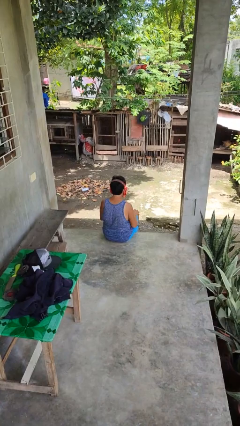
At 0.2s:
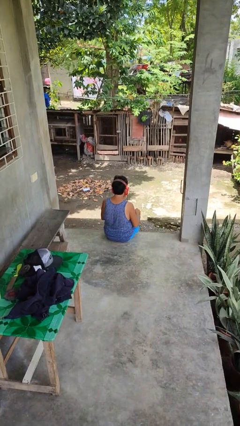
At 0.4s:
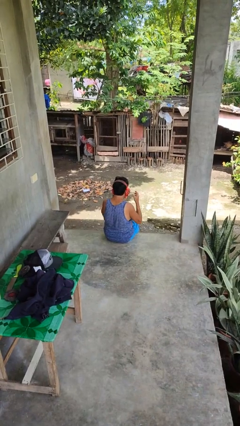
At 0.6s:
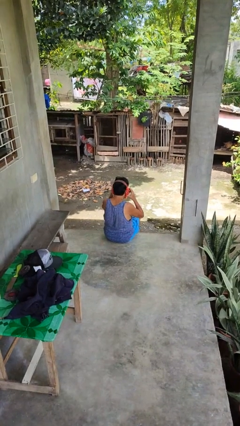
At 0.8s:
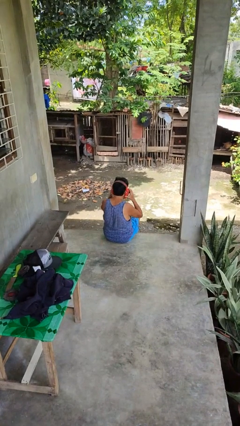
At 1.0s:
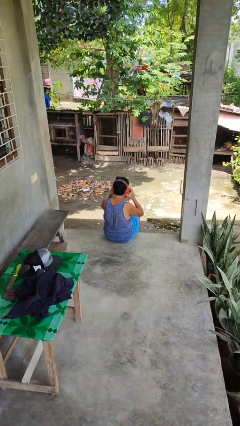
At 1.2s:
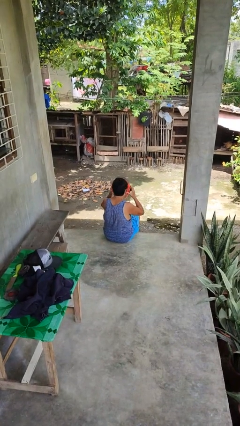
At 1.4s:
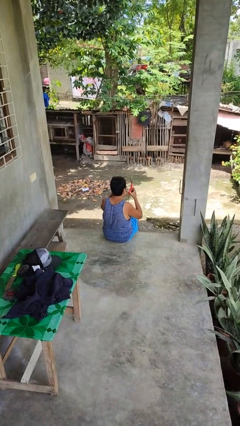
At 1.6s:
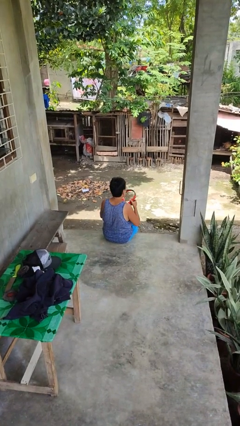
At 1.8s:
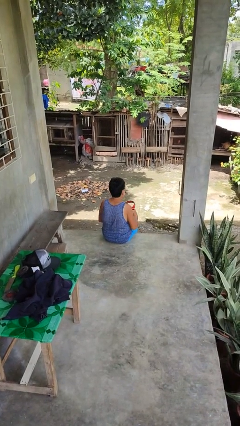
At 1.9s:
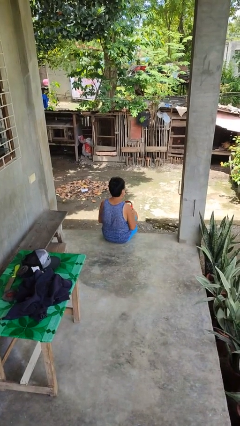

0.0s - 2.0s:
person takes off headphones

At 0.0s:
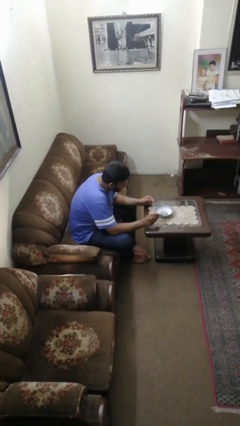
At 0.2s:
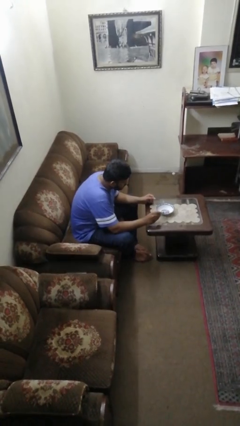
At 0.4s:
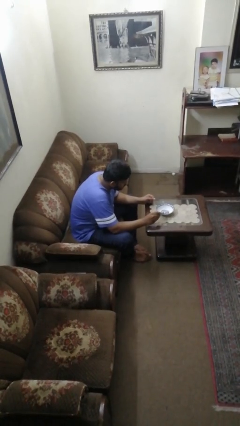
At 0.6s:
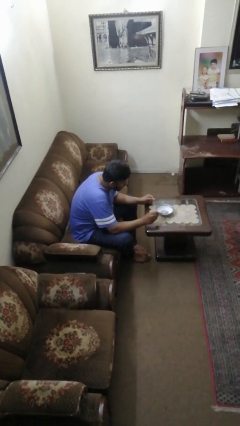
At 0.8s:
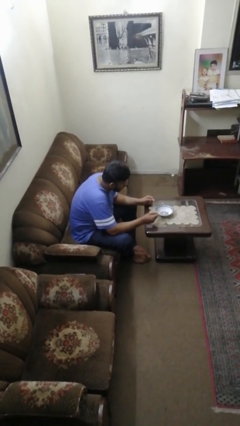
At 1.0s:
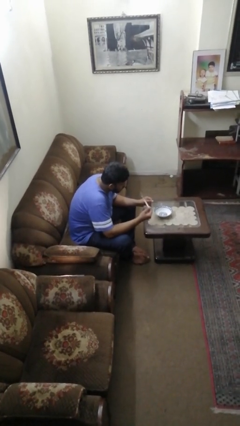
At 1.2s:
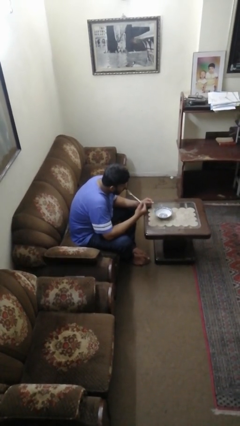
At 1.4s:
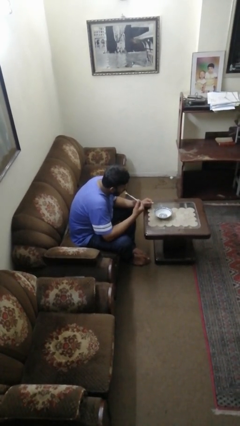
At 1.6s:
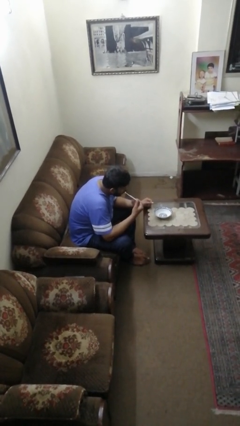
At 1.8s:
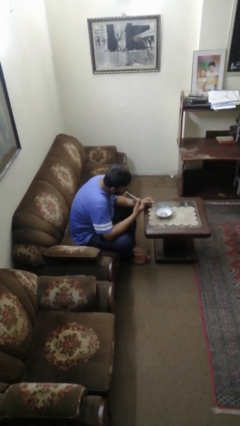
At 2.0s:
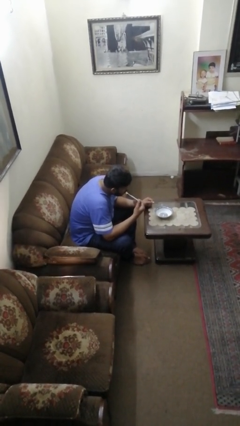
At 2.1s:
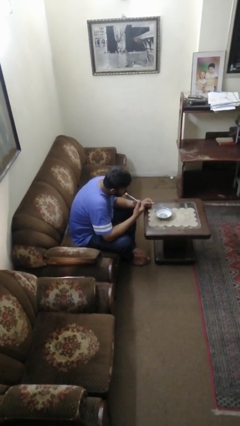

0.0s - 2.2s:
person eats with utensil

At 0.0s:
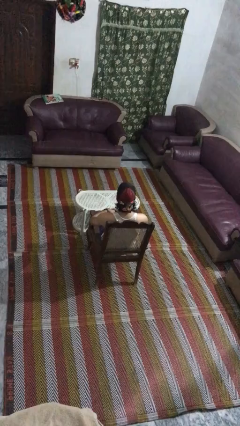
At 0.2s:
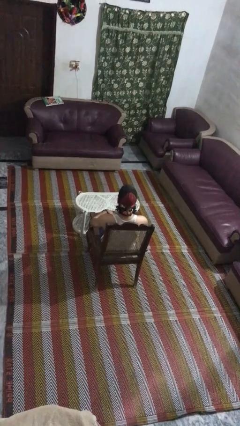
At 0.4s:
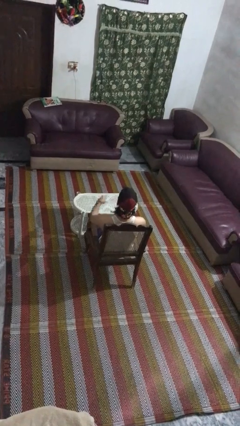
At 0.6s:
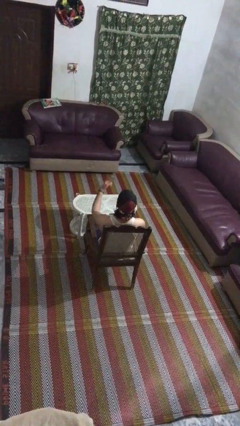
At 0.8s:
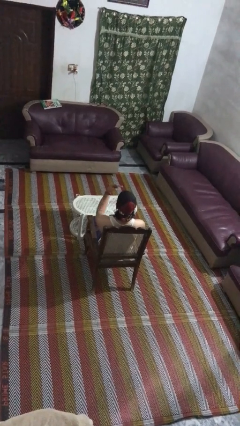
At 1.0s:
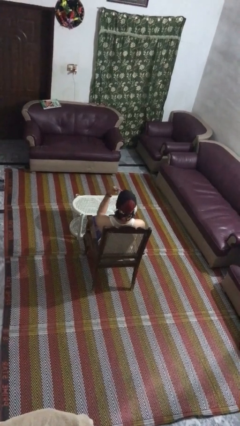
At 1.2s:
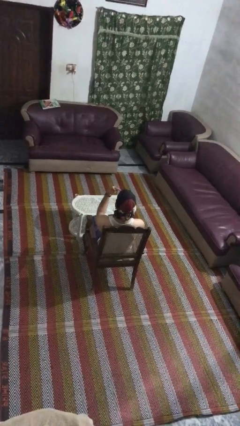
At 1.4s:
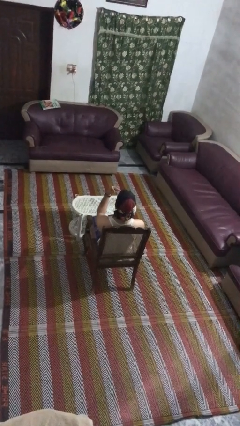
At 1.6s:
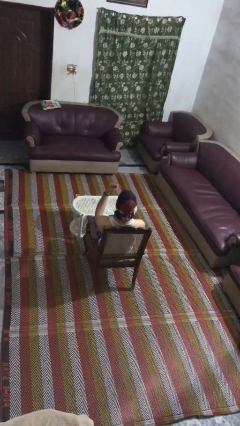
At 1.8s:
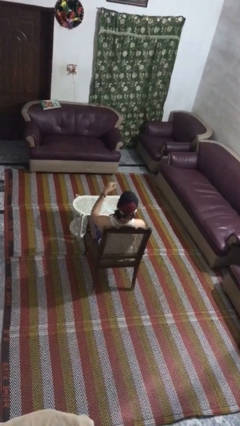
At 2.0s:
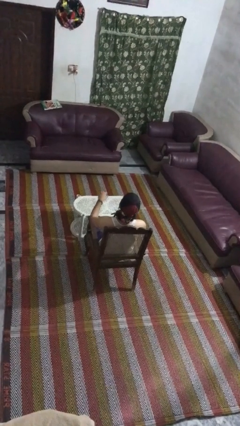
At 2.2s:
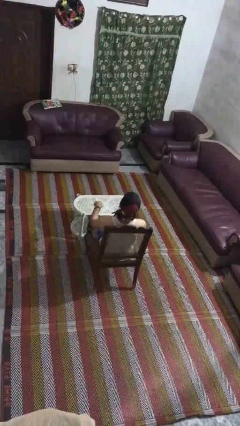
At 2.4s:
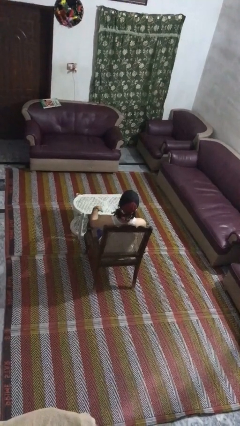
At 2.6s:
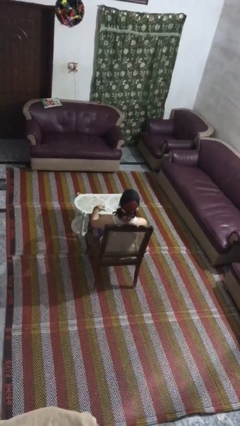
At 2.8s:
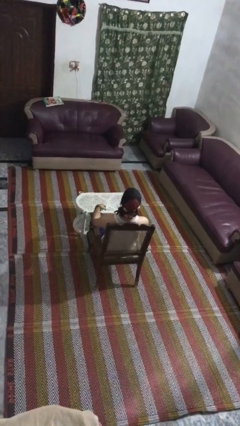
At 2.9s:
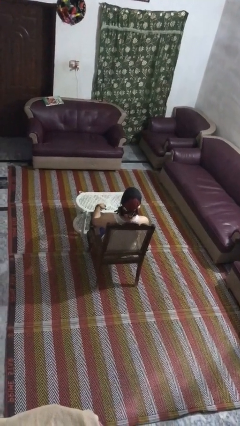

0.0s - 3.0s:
person gestures watch closely

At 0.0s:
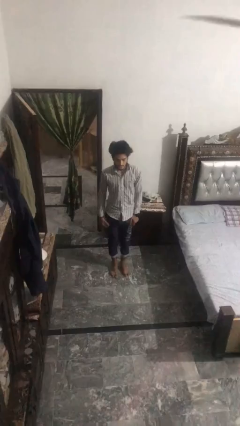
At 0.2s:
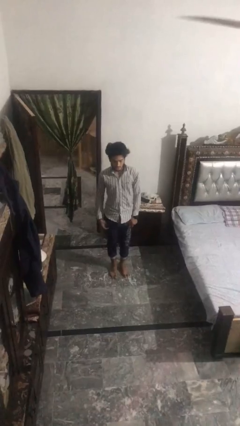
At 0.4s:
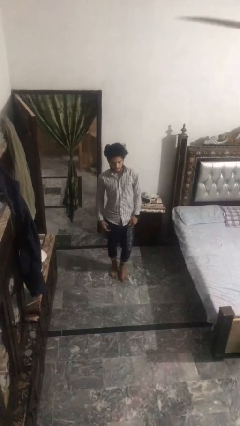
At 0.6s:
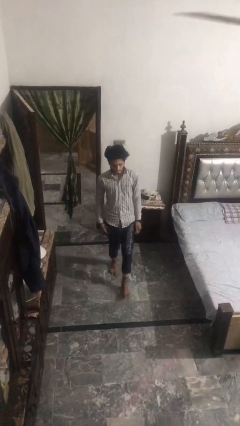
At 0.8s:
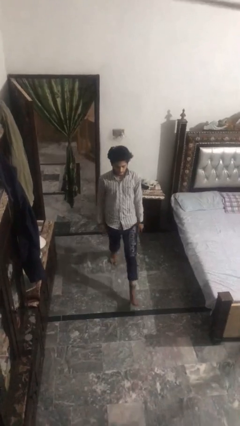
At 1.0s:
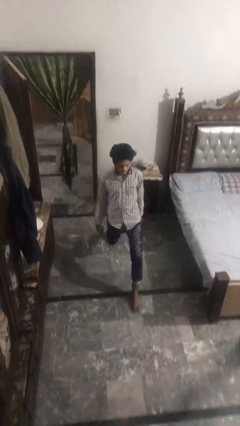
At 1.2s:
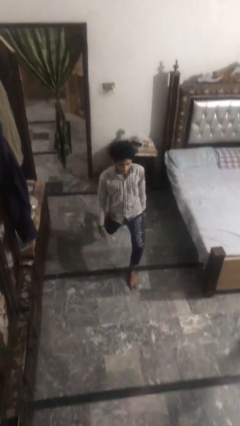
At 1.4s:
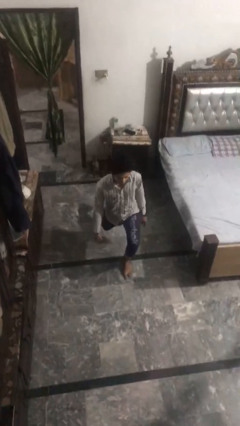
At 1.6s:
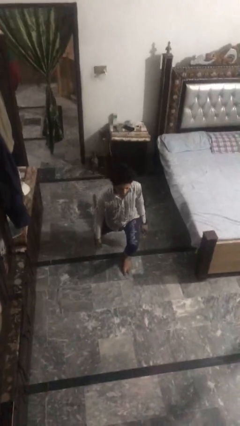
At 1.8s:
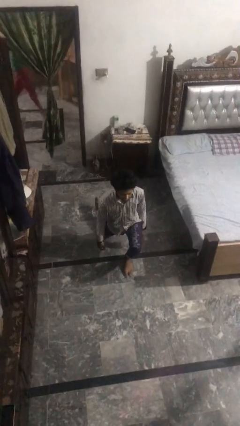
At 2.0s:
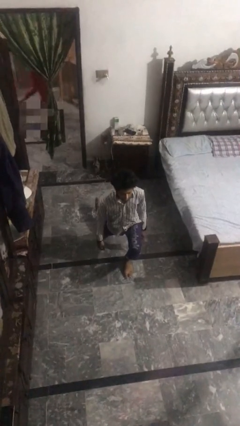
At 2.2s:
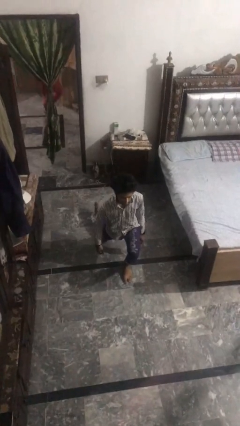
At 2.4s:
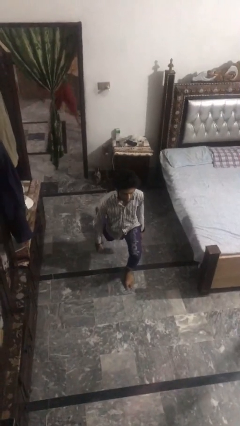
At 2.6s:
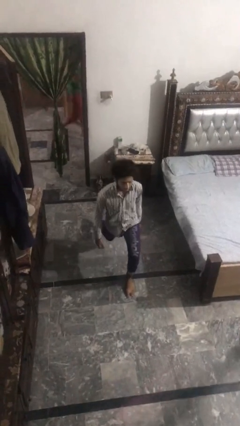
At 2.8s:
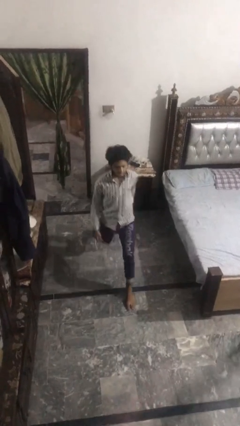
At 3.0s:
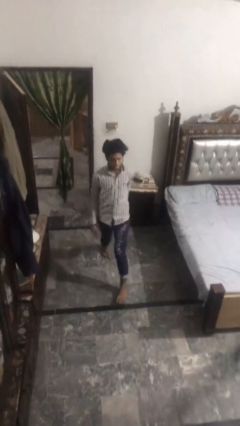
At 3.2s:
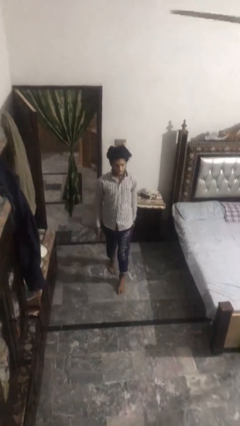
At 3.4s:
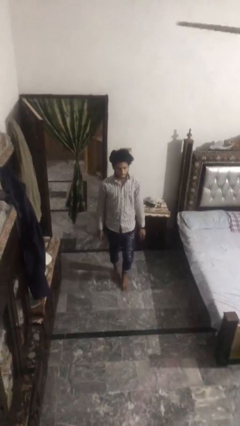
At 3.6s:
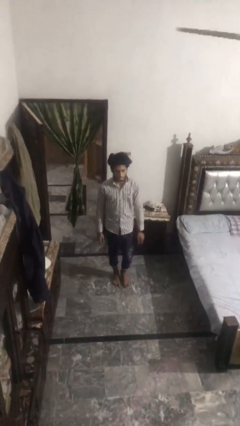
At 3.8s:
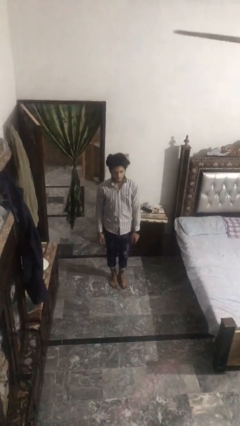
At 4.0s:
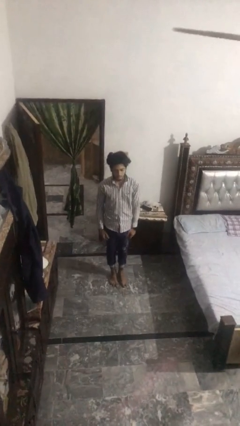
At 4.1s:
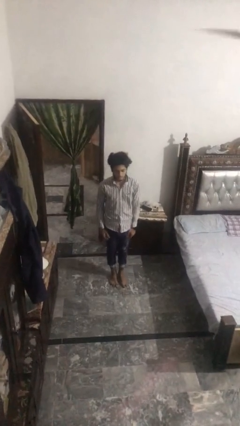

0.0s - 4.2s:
person exercises with lunges

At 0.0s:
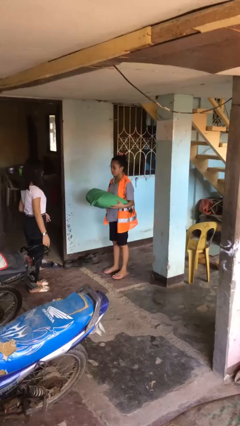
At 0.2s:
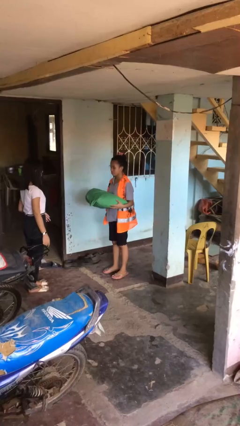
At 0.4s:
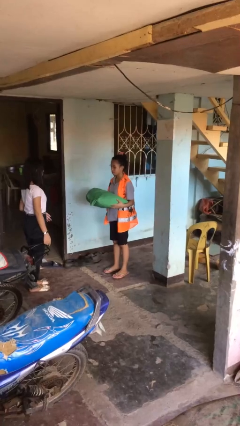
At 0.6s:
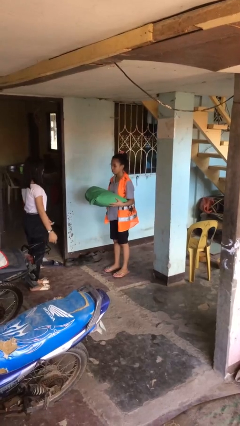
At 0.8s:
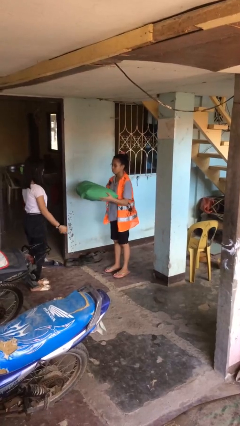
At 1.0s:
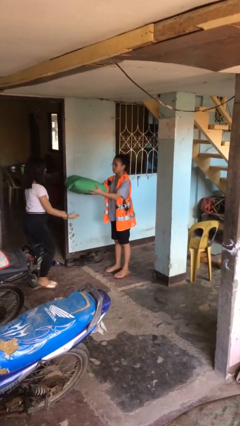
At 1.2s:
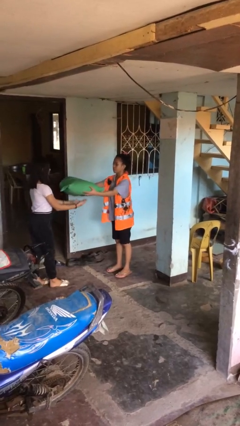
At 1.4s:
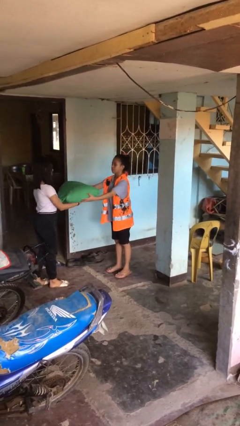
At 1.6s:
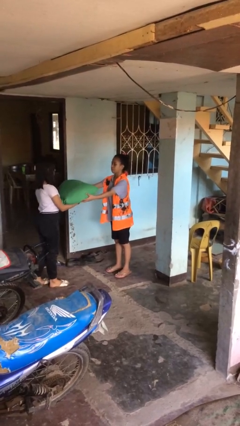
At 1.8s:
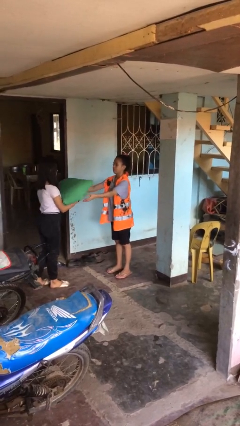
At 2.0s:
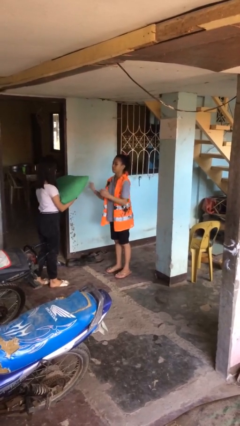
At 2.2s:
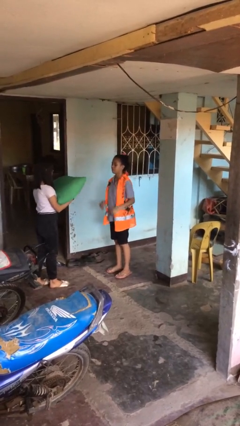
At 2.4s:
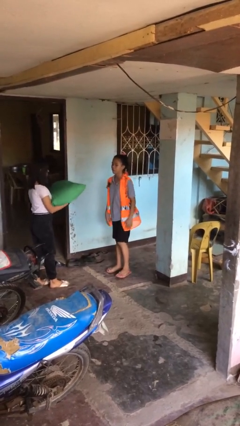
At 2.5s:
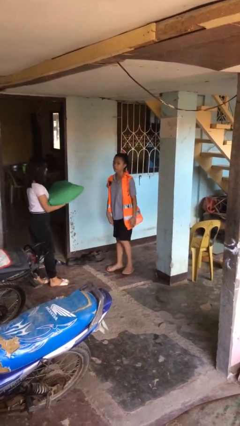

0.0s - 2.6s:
person transfers object to person

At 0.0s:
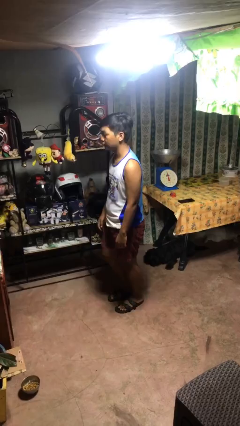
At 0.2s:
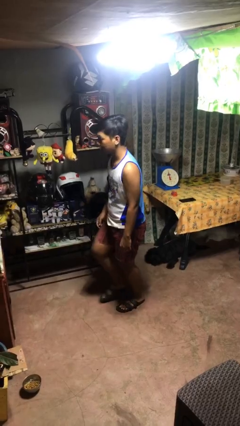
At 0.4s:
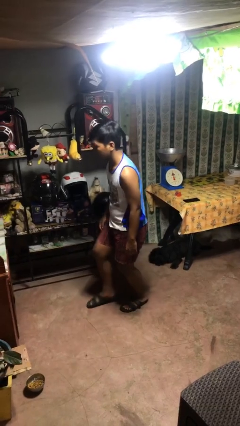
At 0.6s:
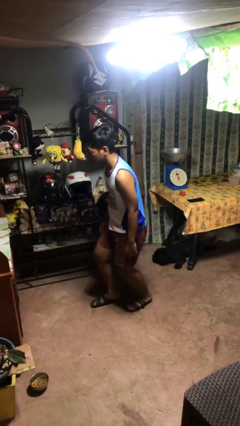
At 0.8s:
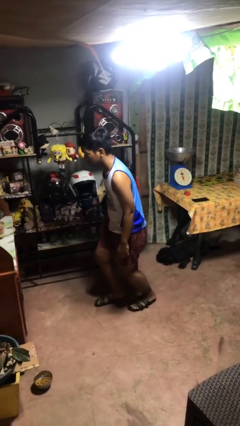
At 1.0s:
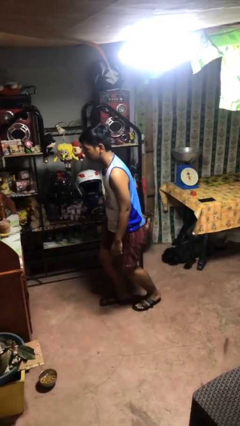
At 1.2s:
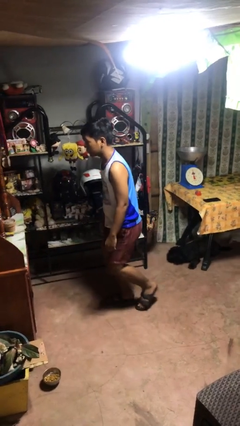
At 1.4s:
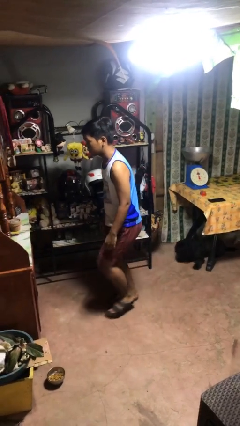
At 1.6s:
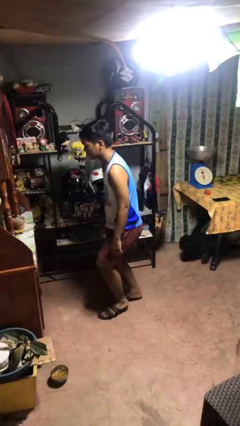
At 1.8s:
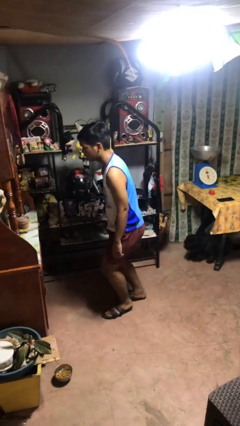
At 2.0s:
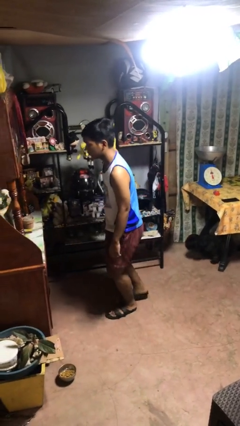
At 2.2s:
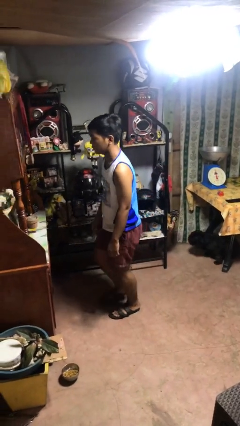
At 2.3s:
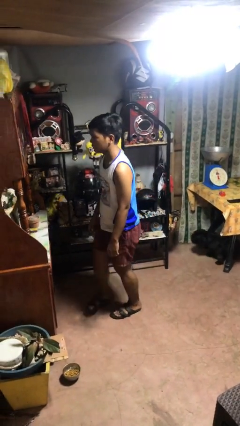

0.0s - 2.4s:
person walks tiptoe

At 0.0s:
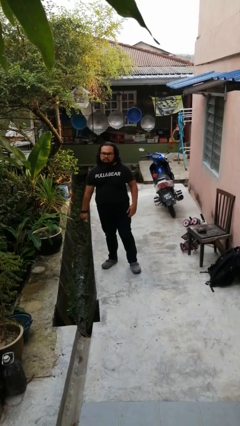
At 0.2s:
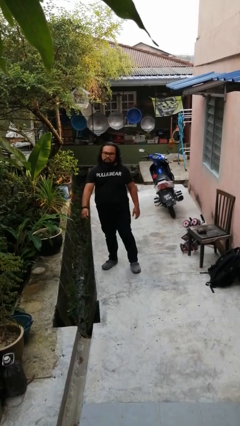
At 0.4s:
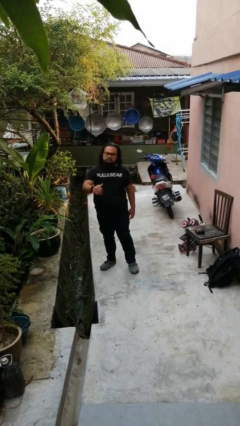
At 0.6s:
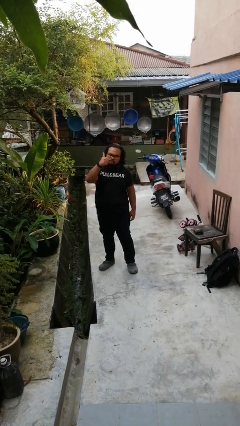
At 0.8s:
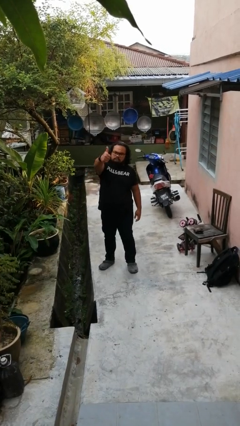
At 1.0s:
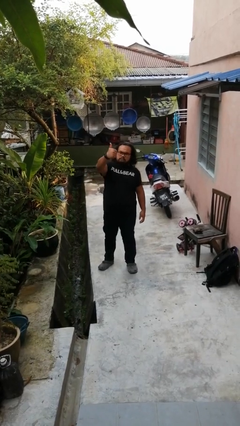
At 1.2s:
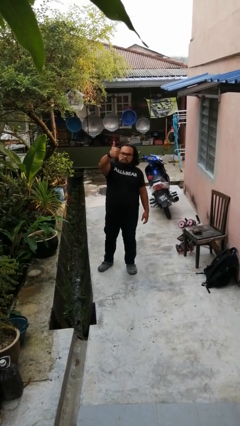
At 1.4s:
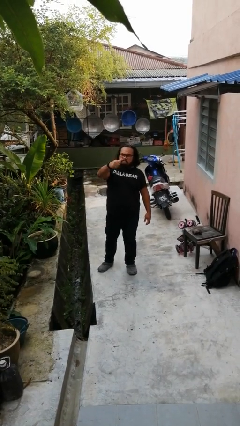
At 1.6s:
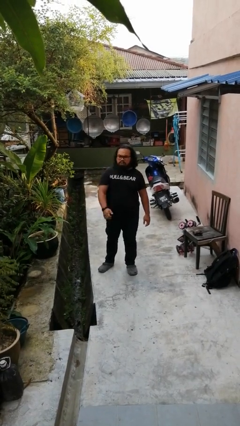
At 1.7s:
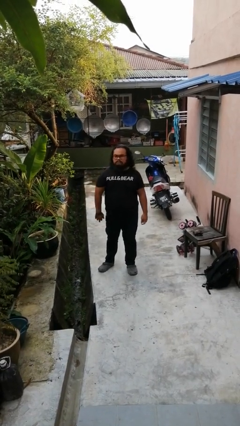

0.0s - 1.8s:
person gestures thumbs up
